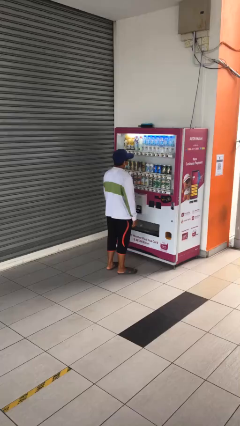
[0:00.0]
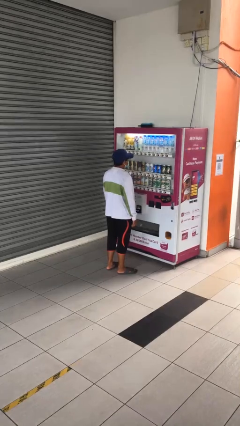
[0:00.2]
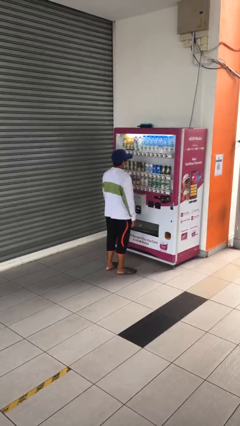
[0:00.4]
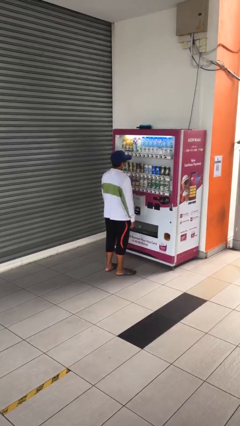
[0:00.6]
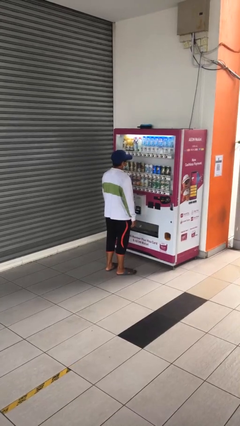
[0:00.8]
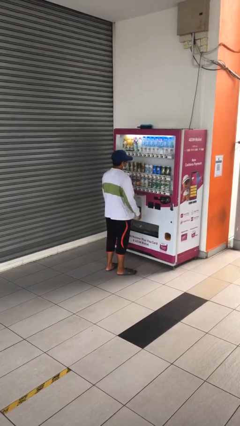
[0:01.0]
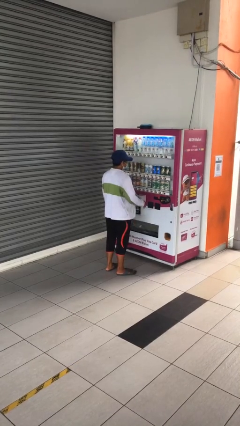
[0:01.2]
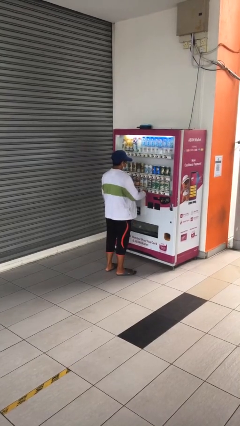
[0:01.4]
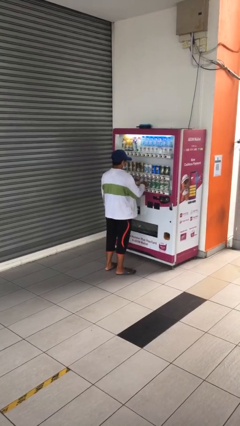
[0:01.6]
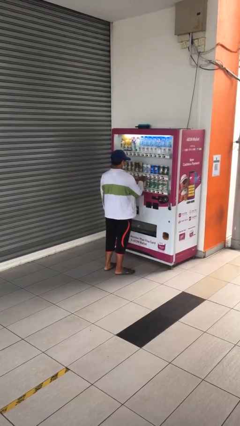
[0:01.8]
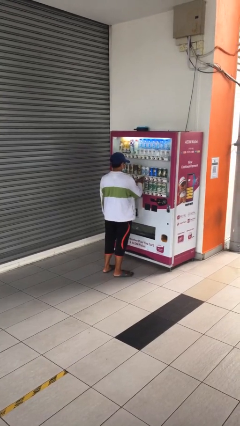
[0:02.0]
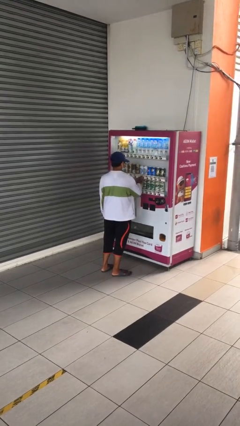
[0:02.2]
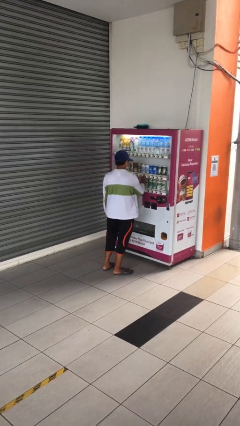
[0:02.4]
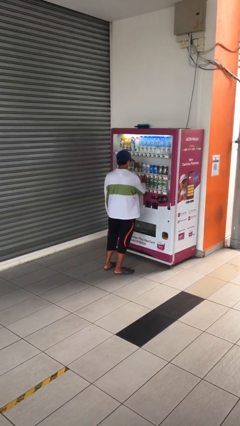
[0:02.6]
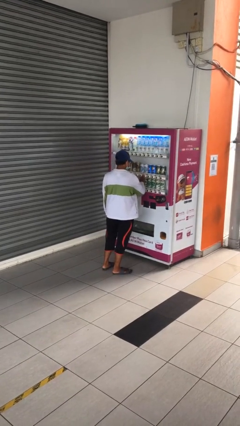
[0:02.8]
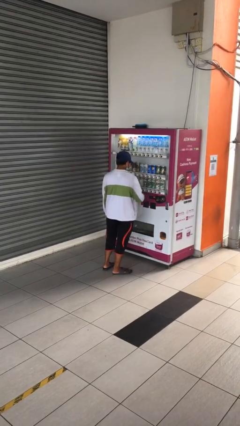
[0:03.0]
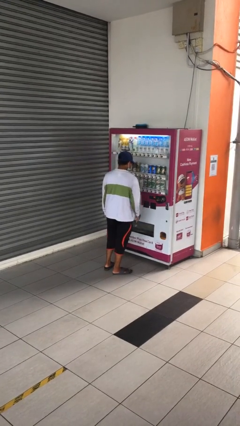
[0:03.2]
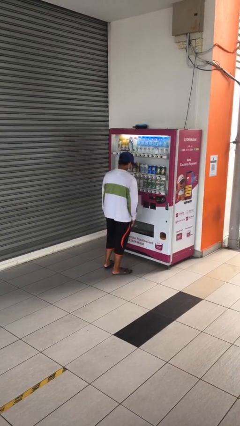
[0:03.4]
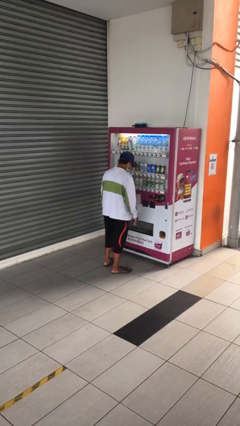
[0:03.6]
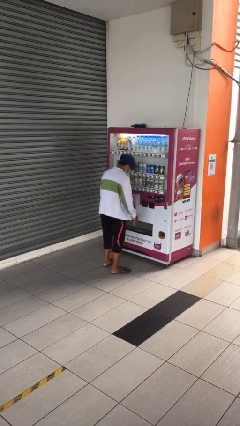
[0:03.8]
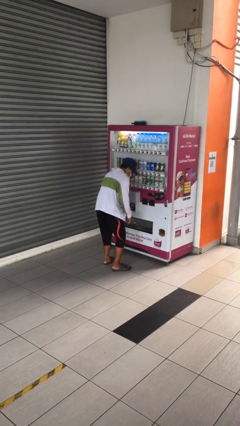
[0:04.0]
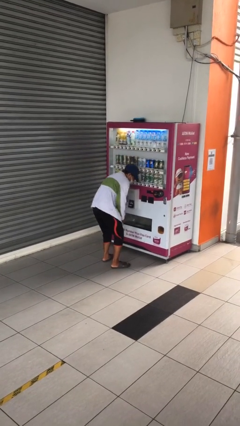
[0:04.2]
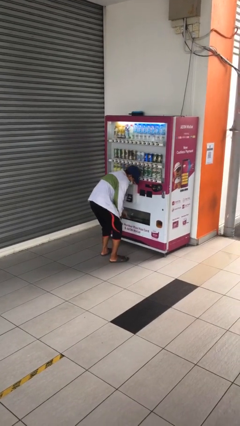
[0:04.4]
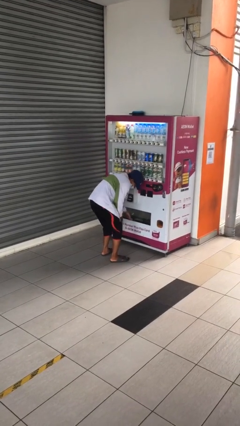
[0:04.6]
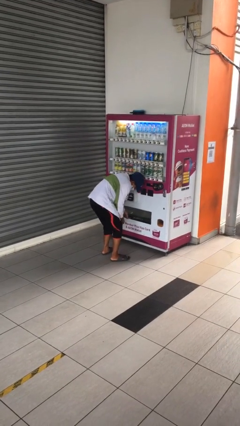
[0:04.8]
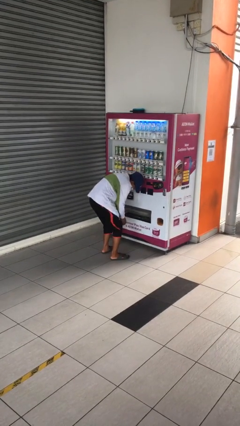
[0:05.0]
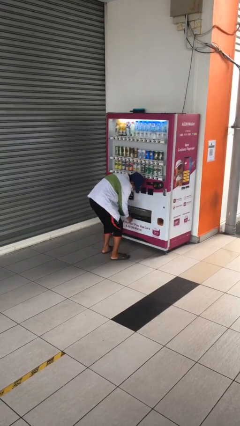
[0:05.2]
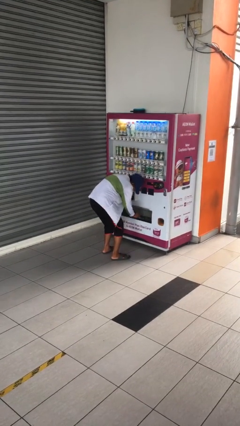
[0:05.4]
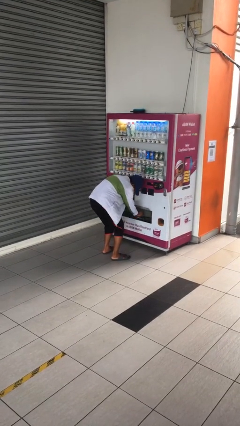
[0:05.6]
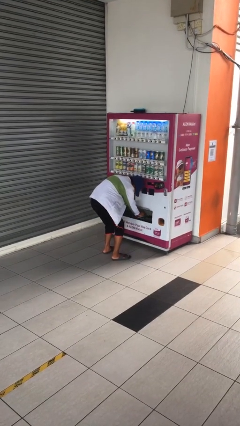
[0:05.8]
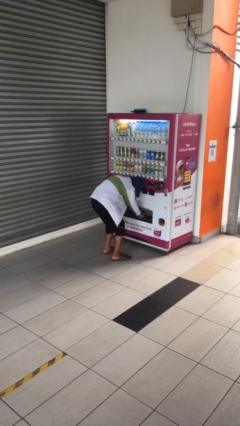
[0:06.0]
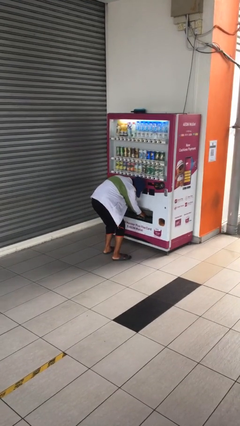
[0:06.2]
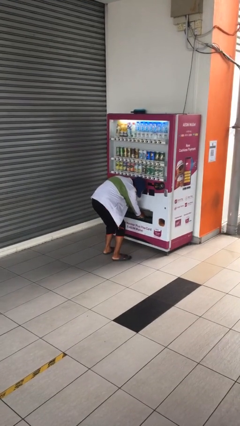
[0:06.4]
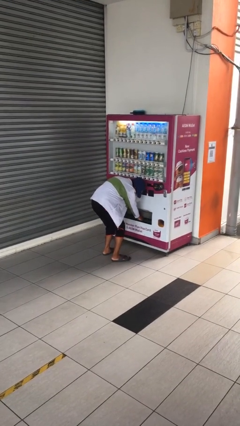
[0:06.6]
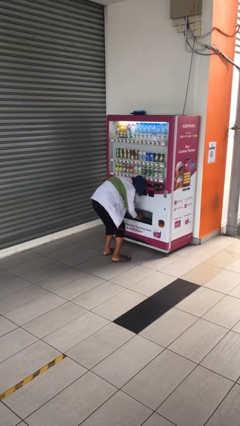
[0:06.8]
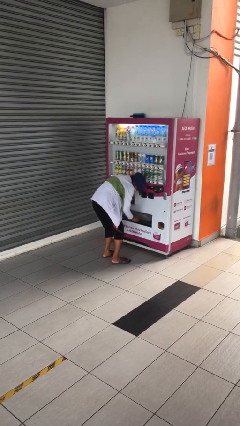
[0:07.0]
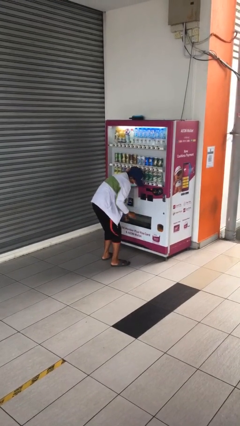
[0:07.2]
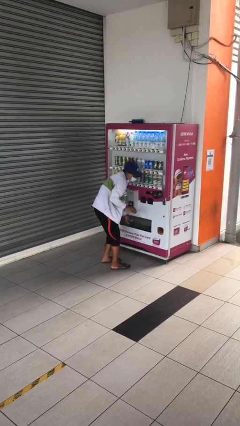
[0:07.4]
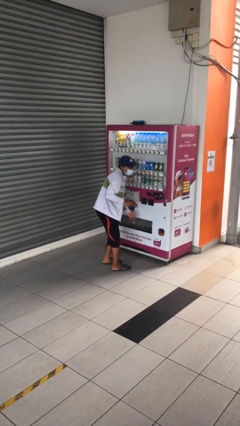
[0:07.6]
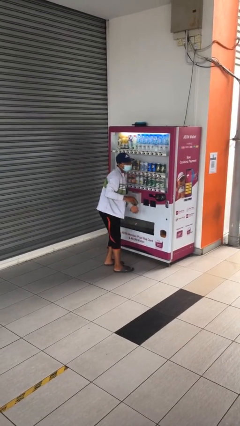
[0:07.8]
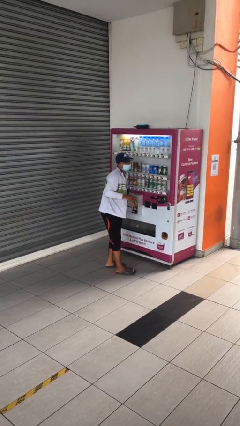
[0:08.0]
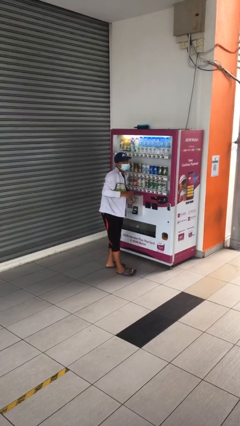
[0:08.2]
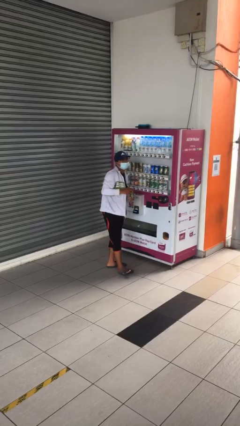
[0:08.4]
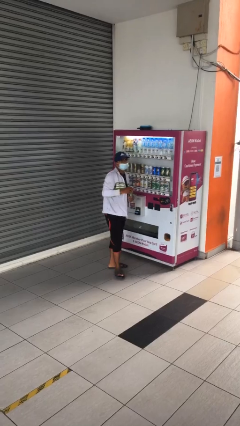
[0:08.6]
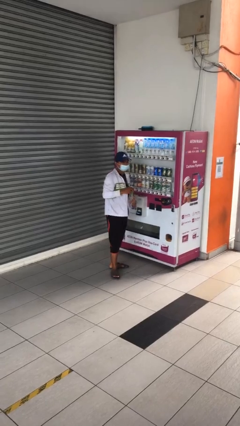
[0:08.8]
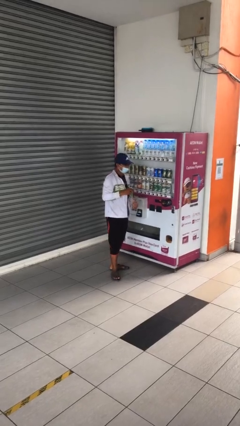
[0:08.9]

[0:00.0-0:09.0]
person purchases from machine

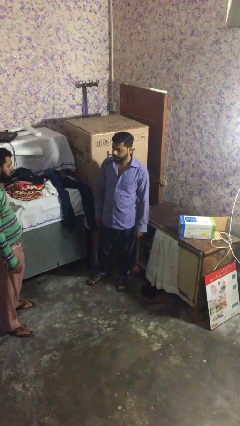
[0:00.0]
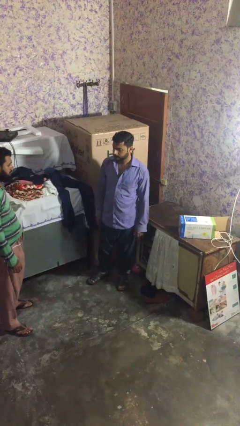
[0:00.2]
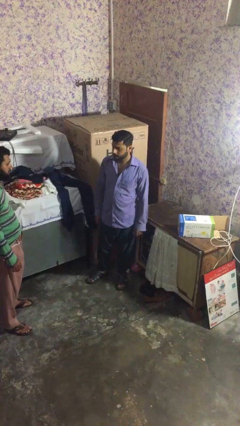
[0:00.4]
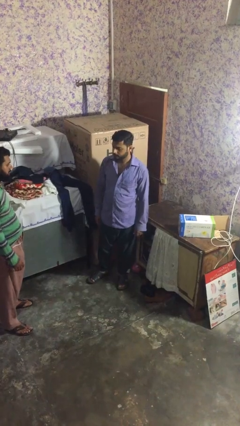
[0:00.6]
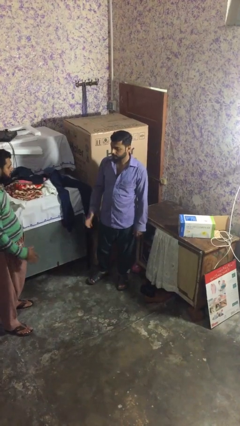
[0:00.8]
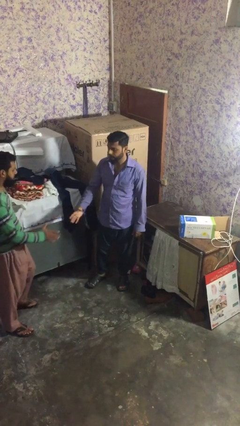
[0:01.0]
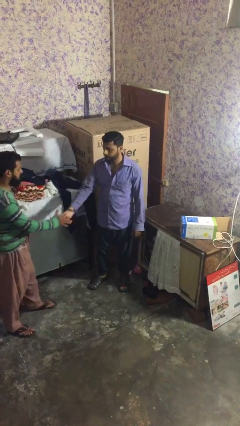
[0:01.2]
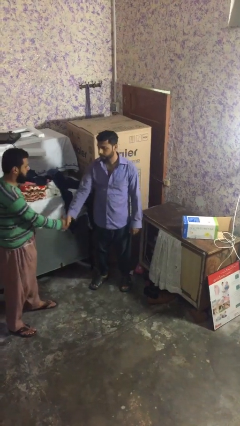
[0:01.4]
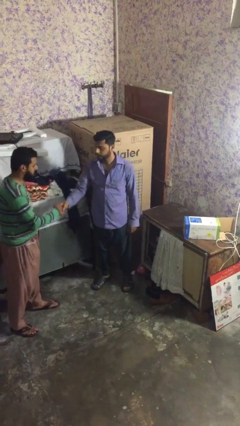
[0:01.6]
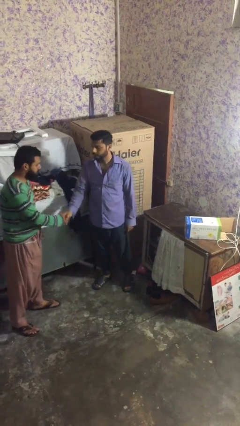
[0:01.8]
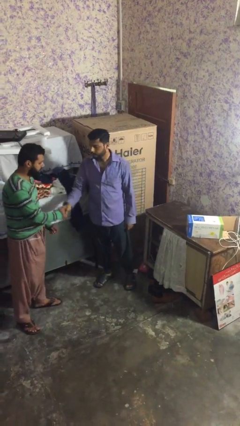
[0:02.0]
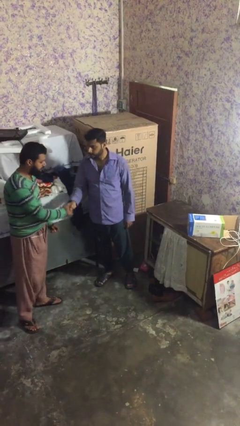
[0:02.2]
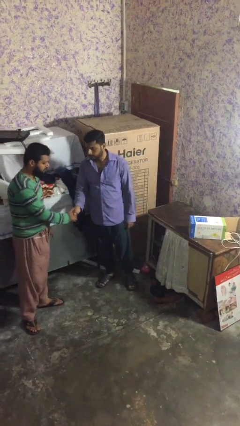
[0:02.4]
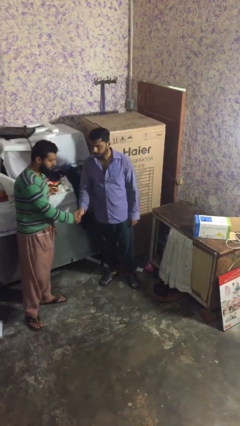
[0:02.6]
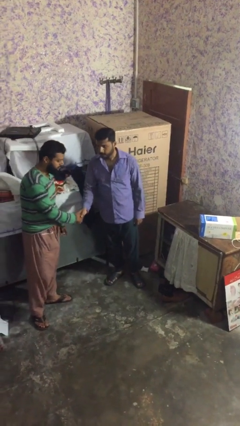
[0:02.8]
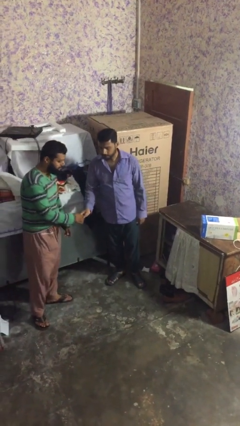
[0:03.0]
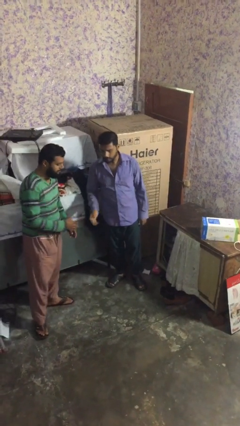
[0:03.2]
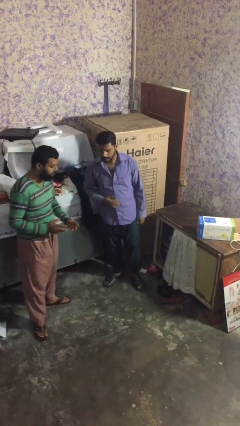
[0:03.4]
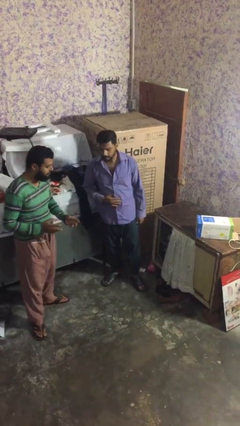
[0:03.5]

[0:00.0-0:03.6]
person shakes hand

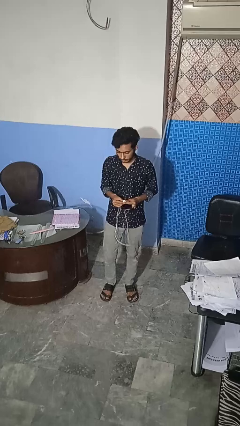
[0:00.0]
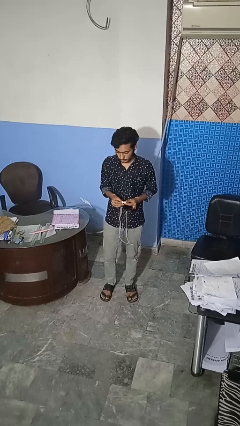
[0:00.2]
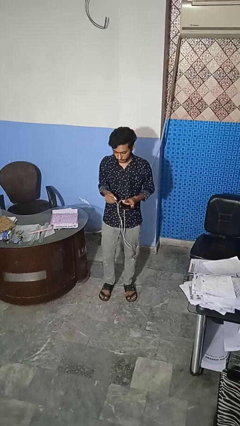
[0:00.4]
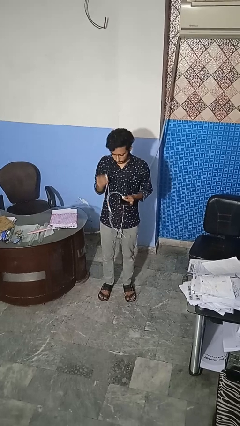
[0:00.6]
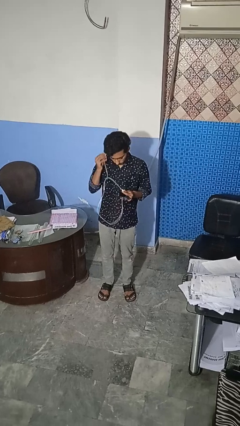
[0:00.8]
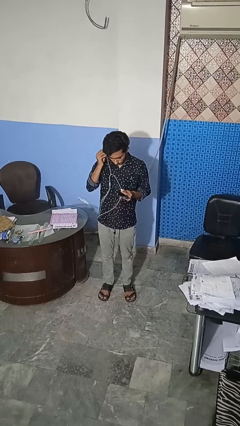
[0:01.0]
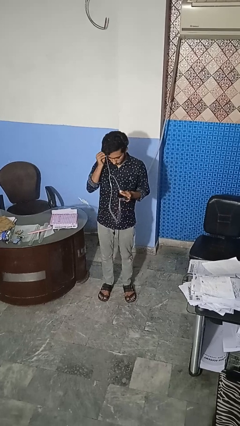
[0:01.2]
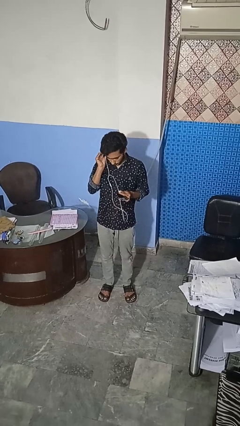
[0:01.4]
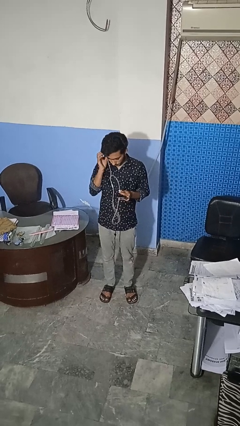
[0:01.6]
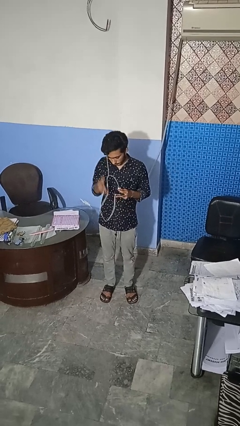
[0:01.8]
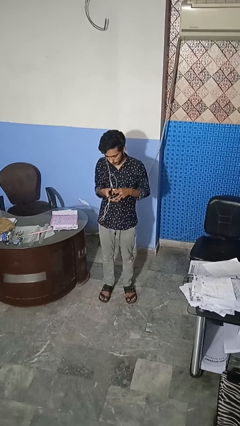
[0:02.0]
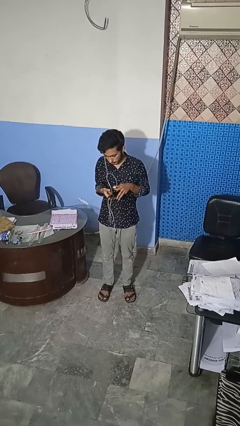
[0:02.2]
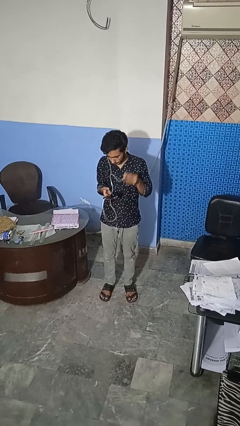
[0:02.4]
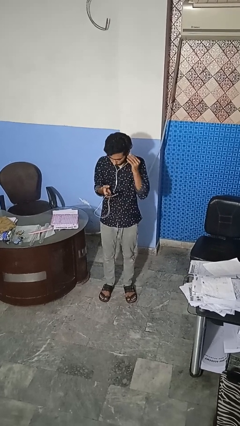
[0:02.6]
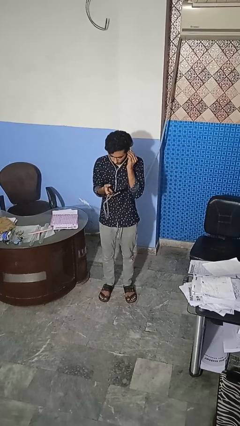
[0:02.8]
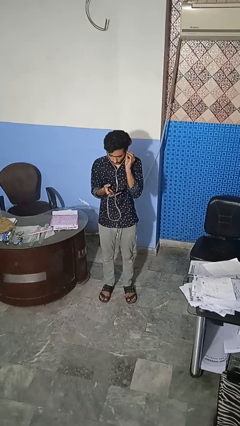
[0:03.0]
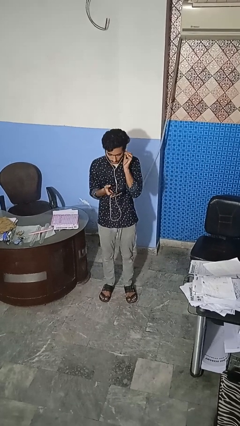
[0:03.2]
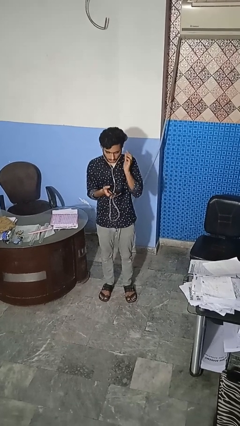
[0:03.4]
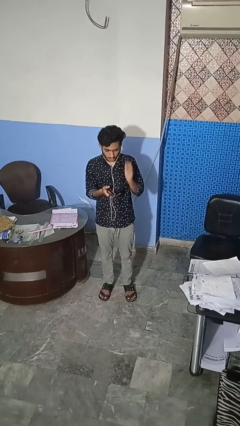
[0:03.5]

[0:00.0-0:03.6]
person puts on headphones

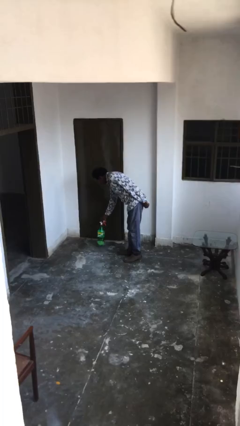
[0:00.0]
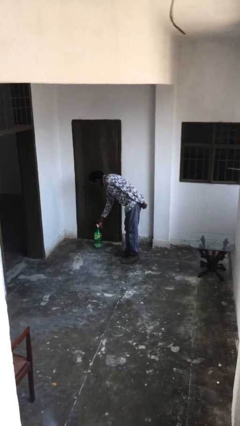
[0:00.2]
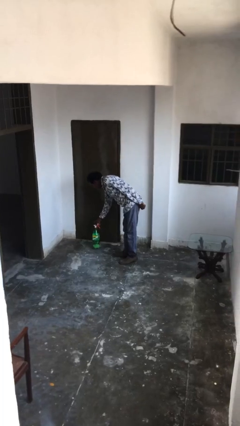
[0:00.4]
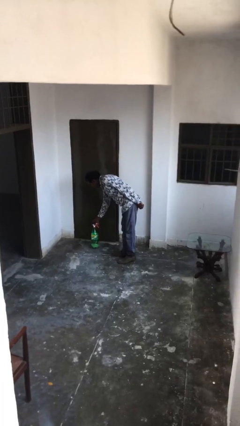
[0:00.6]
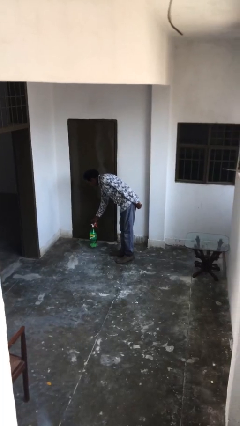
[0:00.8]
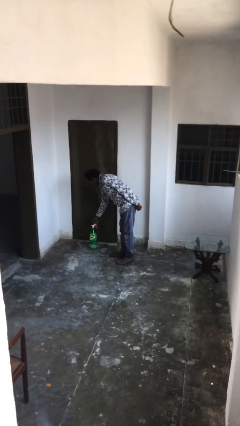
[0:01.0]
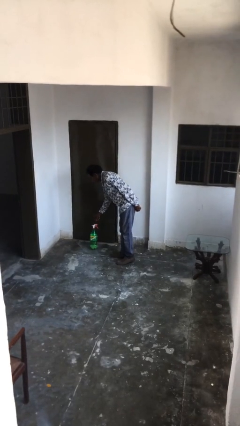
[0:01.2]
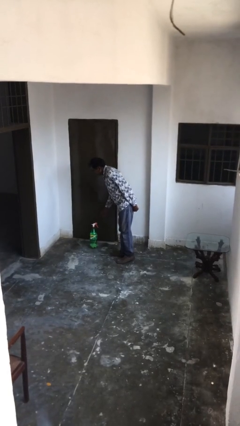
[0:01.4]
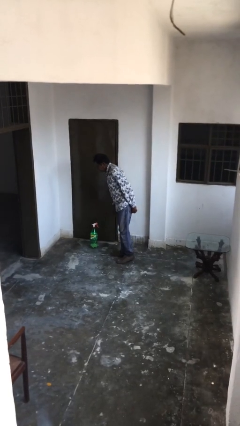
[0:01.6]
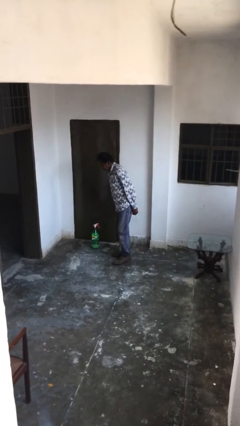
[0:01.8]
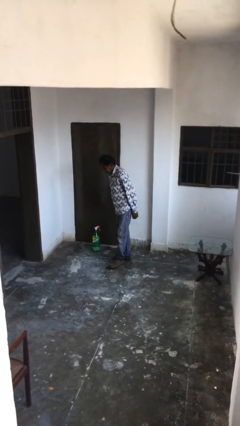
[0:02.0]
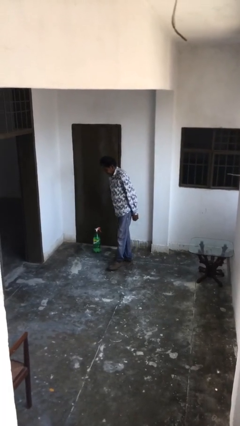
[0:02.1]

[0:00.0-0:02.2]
person puts down object on floor
